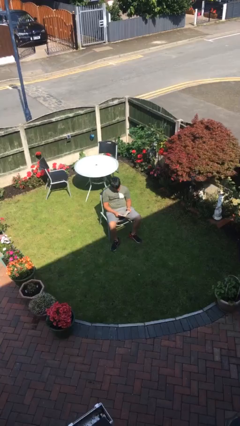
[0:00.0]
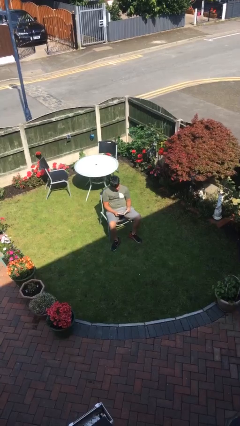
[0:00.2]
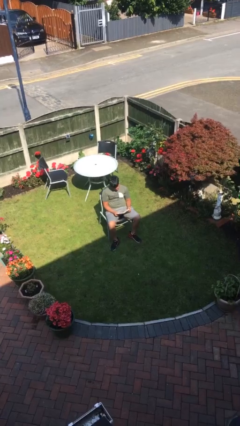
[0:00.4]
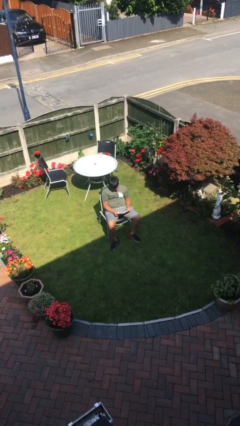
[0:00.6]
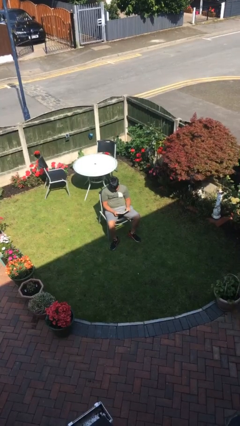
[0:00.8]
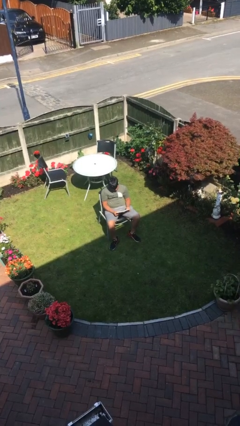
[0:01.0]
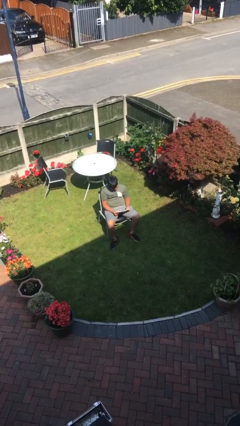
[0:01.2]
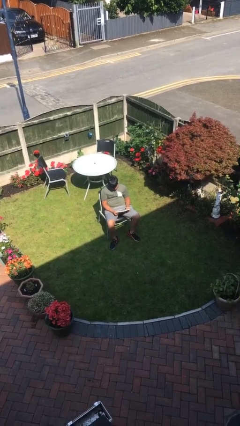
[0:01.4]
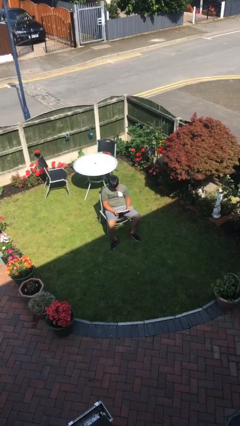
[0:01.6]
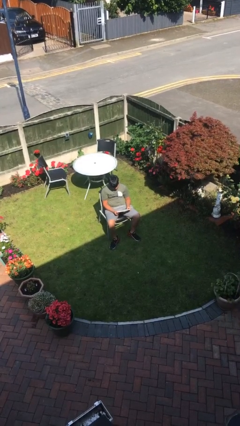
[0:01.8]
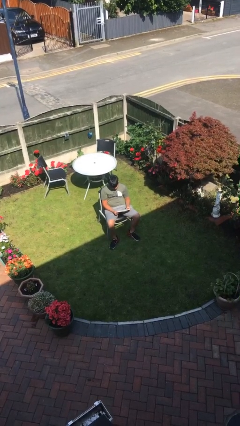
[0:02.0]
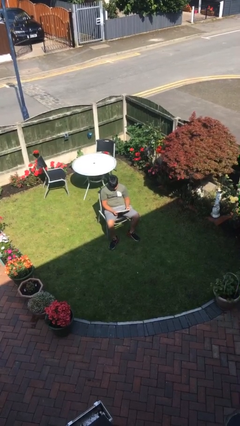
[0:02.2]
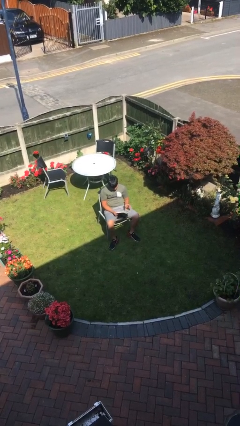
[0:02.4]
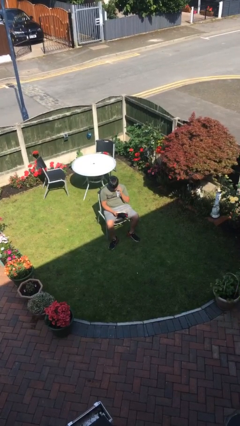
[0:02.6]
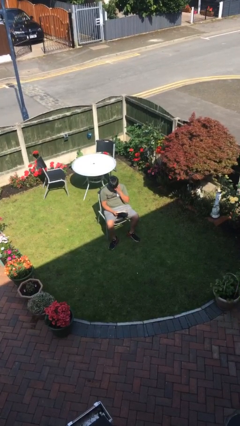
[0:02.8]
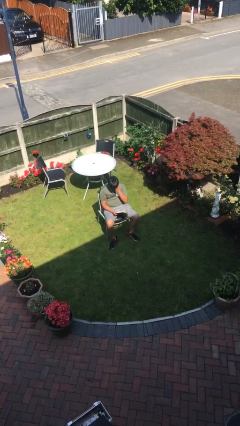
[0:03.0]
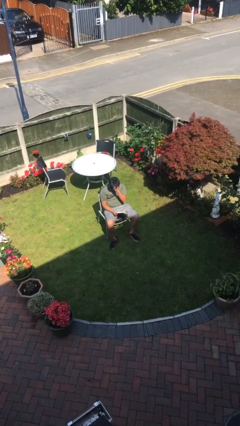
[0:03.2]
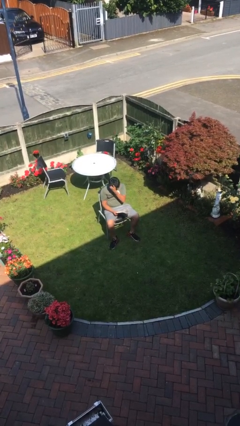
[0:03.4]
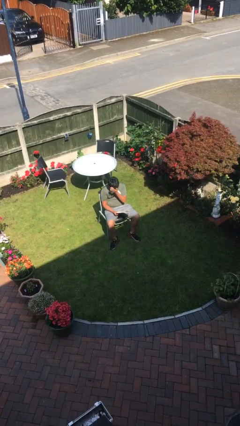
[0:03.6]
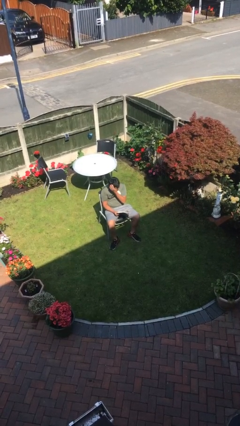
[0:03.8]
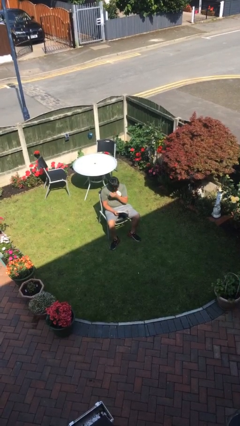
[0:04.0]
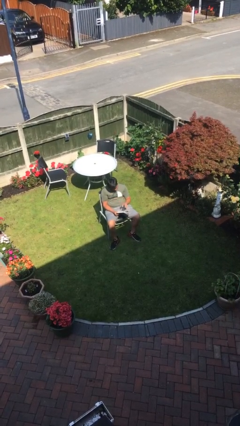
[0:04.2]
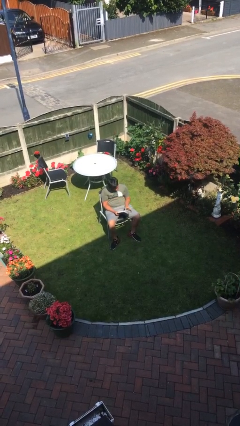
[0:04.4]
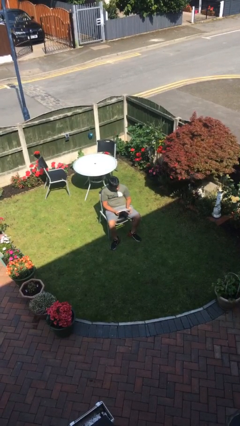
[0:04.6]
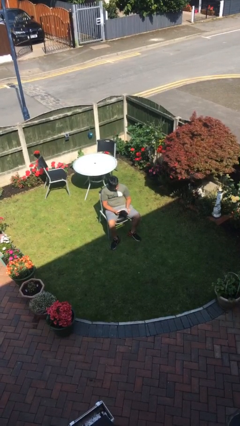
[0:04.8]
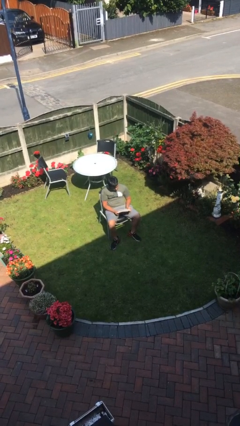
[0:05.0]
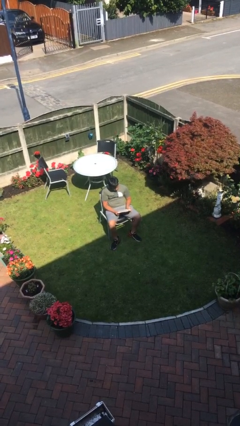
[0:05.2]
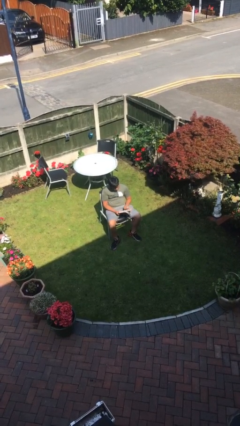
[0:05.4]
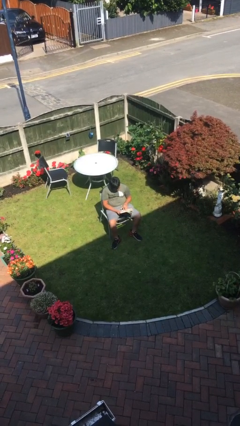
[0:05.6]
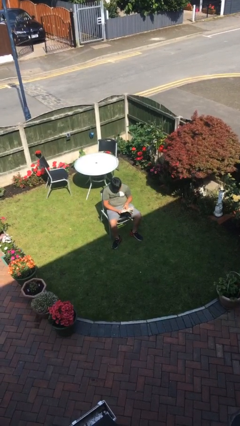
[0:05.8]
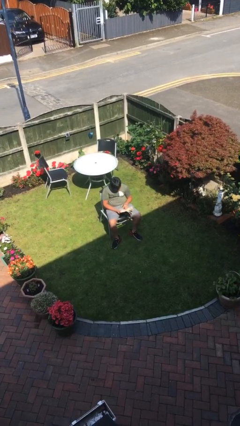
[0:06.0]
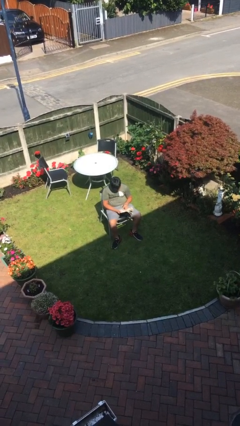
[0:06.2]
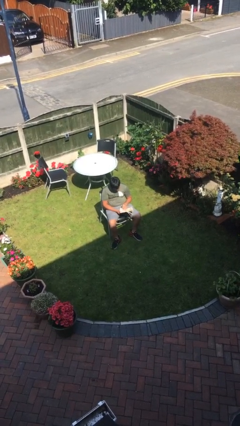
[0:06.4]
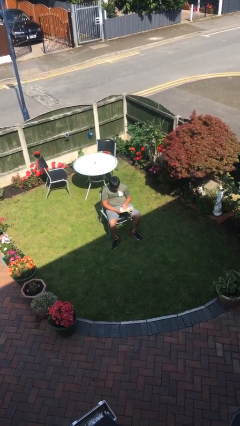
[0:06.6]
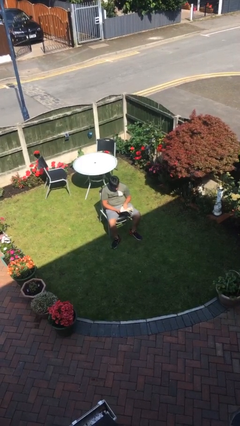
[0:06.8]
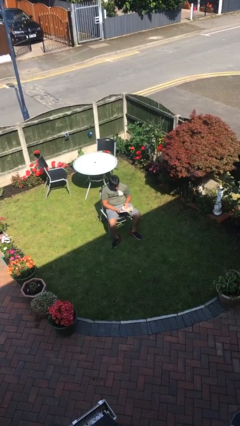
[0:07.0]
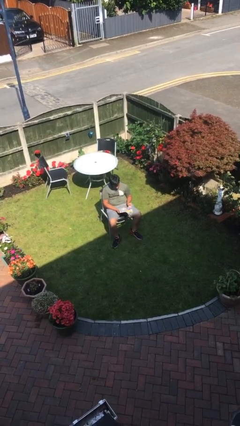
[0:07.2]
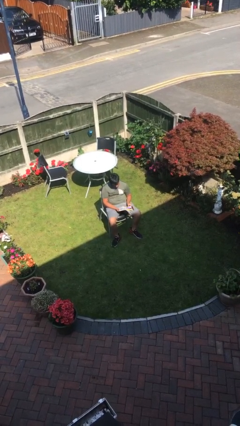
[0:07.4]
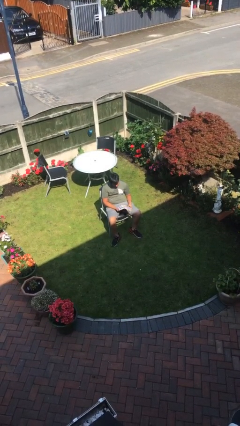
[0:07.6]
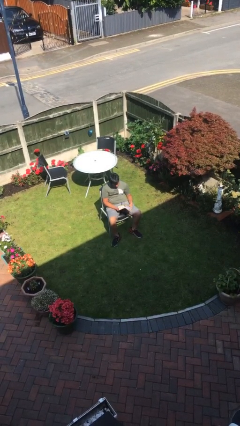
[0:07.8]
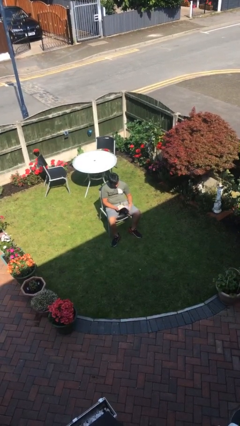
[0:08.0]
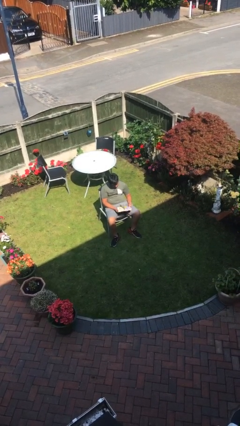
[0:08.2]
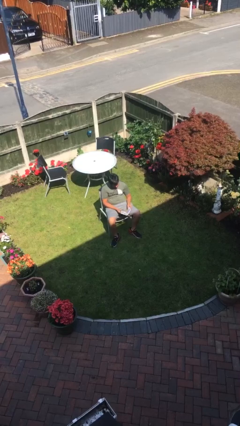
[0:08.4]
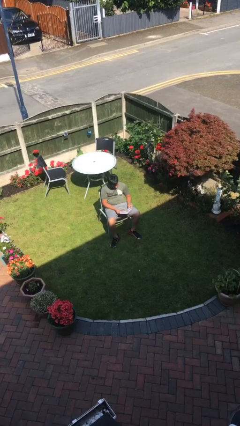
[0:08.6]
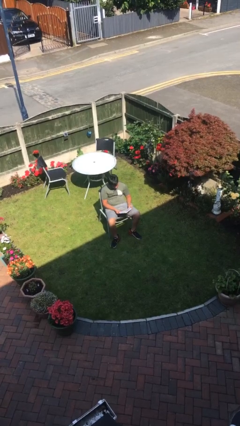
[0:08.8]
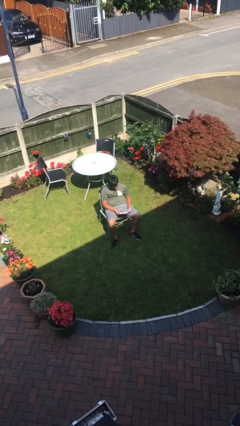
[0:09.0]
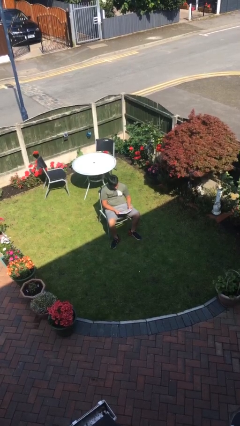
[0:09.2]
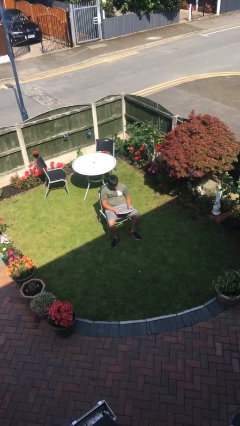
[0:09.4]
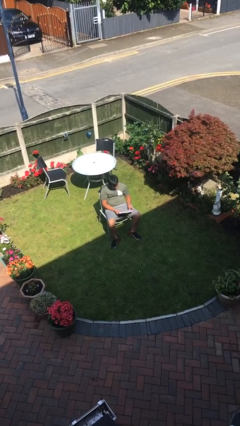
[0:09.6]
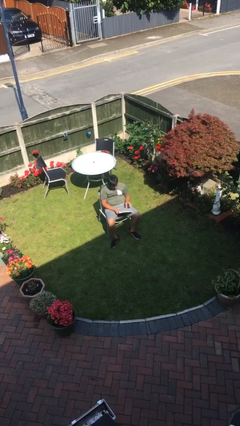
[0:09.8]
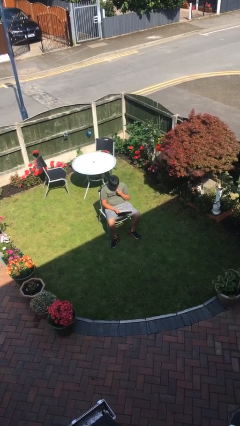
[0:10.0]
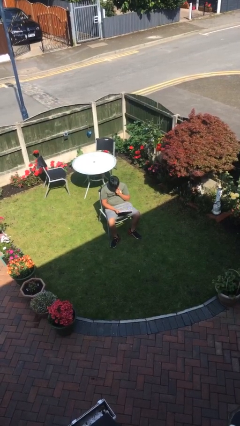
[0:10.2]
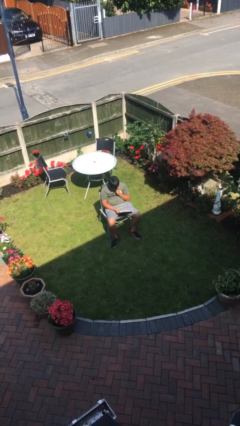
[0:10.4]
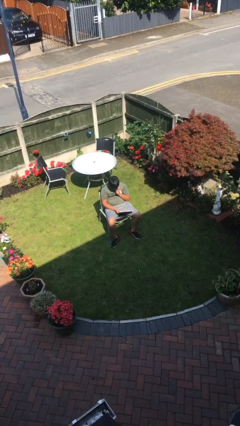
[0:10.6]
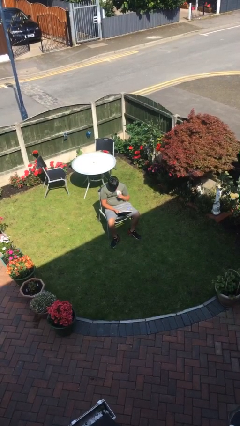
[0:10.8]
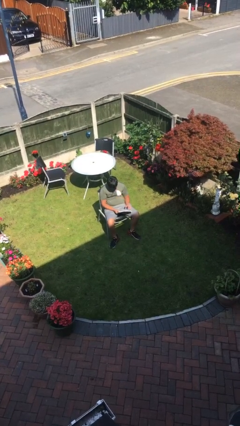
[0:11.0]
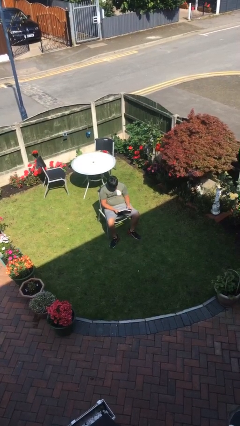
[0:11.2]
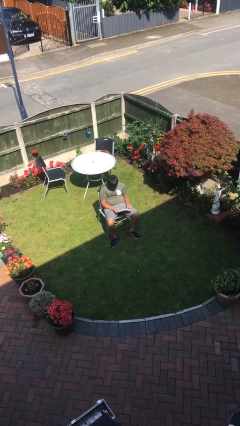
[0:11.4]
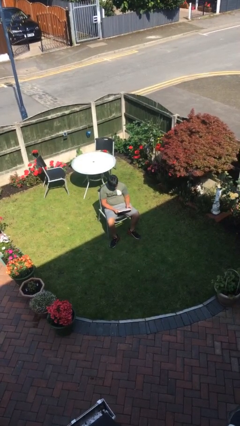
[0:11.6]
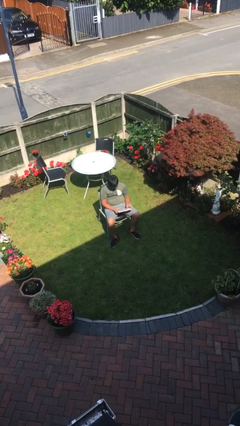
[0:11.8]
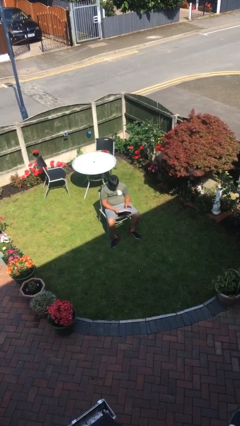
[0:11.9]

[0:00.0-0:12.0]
person reads document

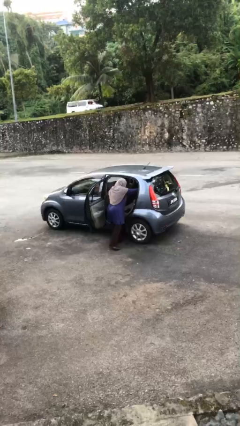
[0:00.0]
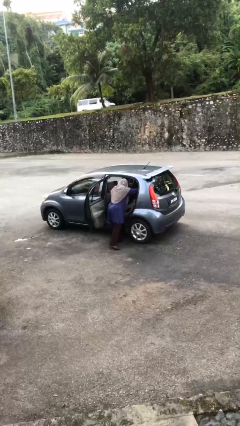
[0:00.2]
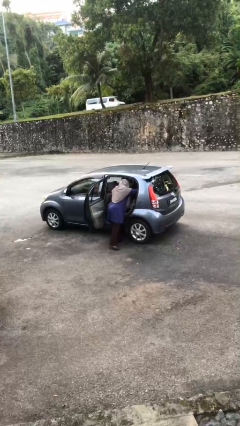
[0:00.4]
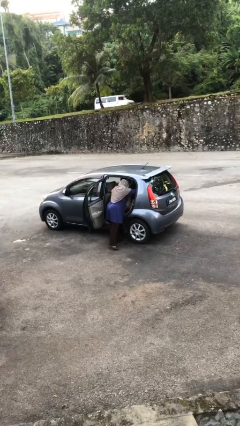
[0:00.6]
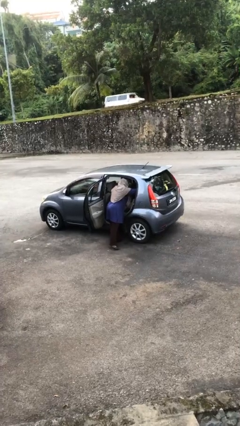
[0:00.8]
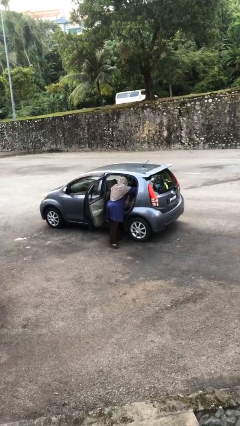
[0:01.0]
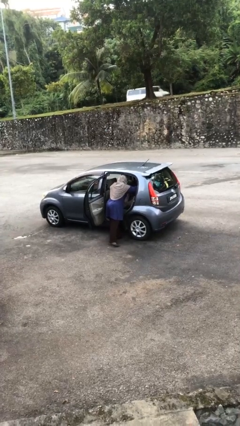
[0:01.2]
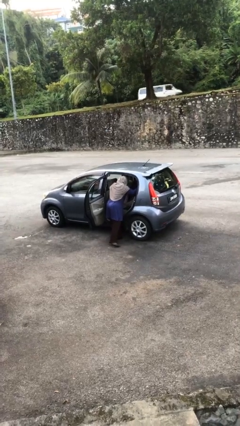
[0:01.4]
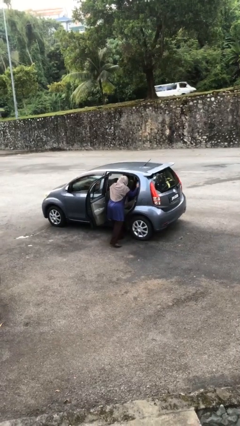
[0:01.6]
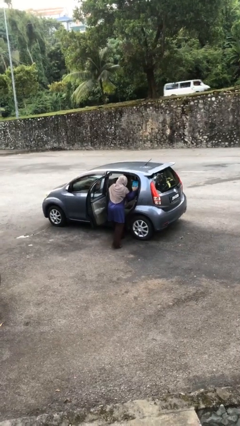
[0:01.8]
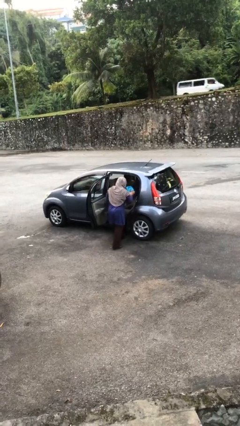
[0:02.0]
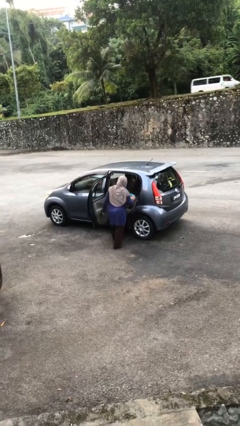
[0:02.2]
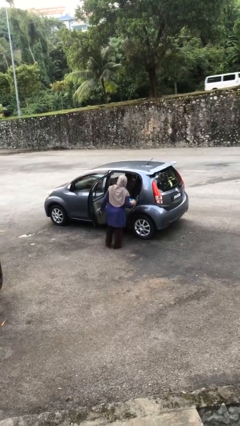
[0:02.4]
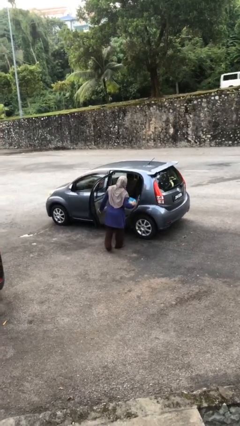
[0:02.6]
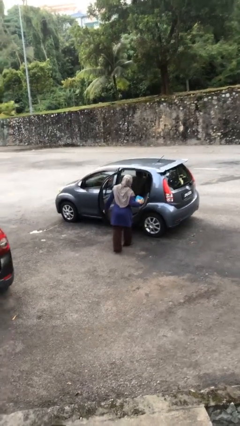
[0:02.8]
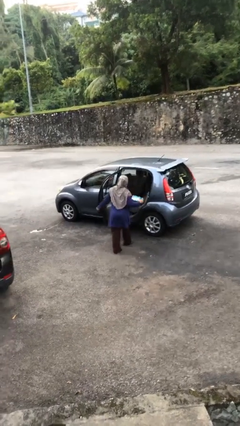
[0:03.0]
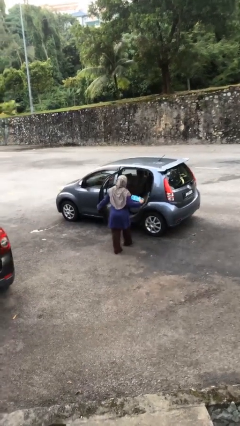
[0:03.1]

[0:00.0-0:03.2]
person unloads car

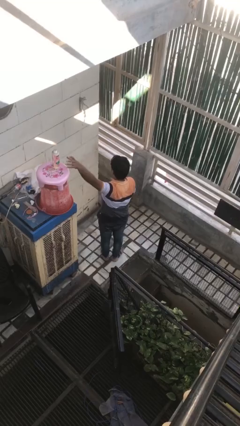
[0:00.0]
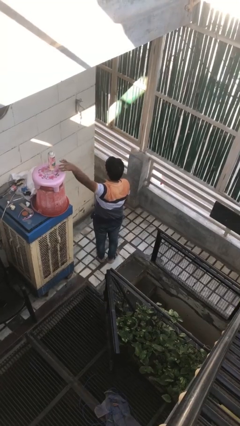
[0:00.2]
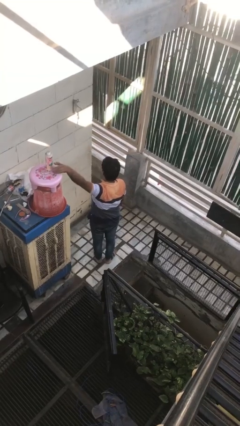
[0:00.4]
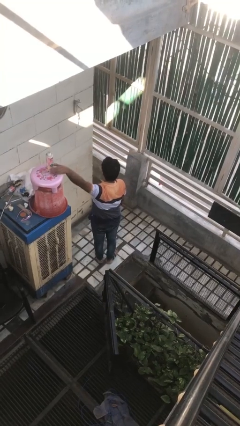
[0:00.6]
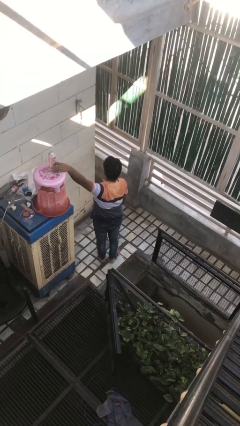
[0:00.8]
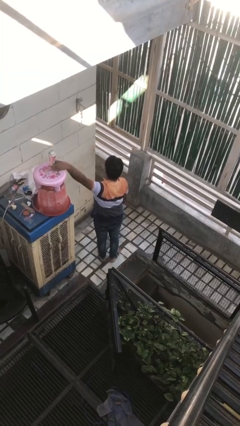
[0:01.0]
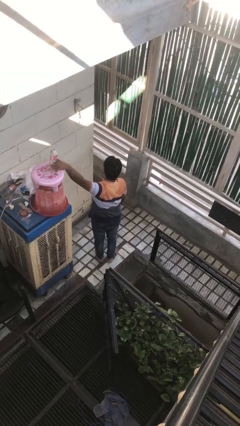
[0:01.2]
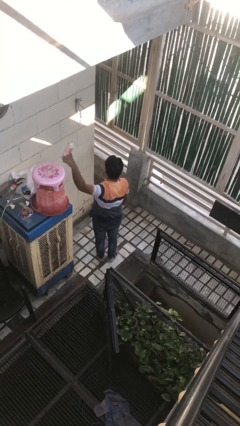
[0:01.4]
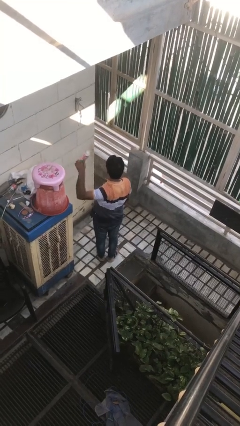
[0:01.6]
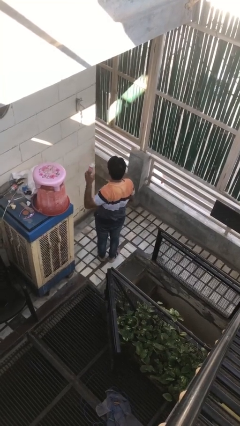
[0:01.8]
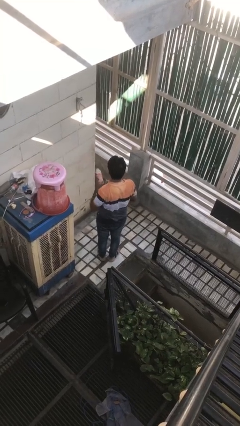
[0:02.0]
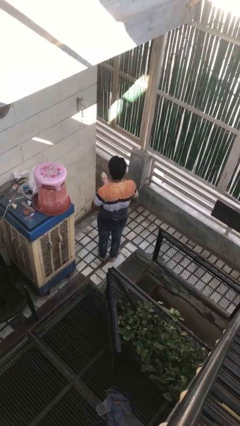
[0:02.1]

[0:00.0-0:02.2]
person picks up object from countertop

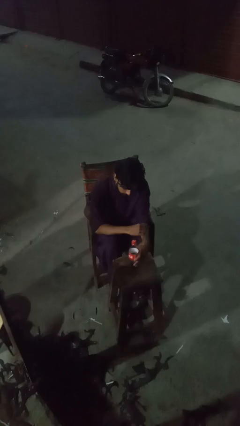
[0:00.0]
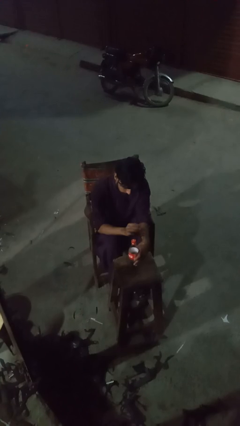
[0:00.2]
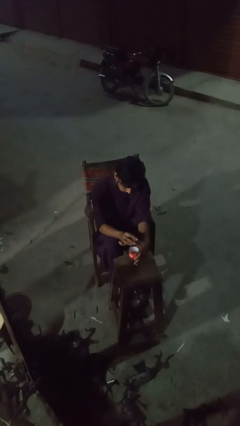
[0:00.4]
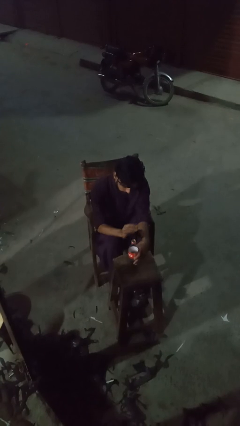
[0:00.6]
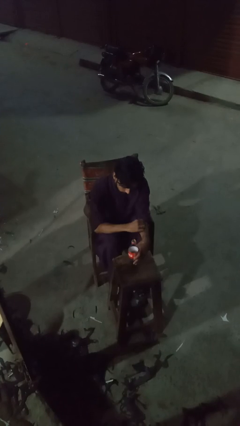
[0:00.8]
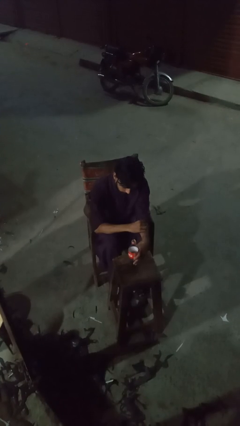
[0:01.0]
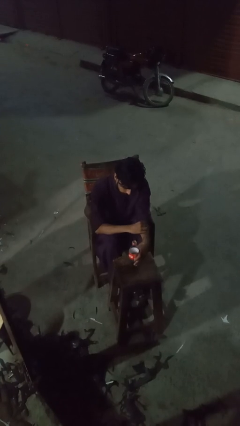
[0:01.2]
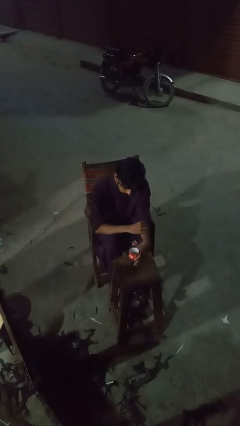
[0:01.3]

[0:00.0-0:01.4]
person unscrews lid from bottle
